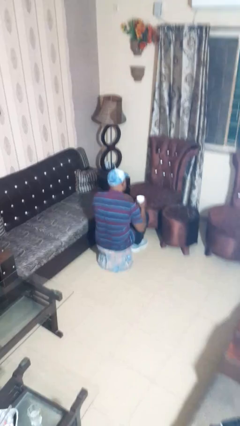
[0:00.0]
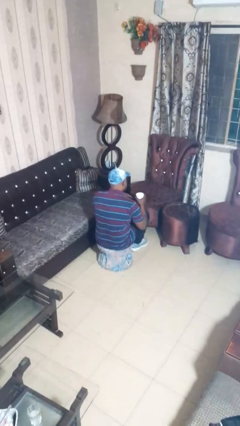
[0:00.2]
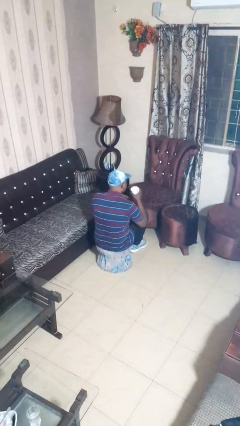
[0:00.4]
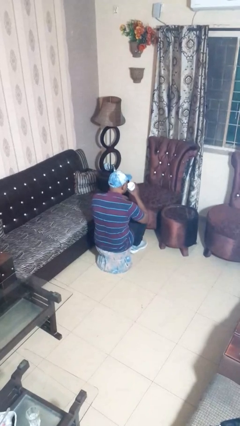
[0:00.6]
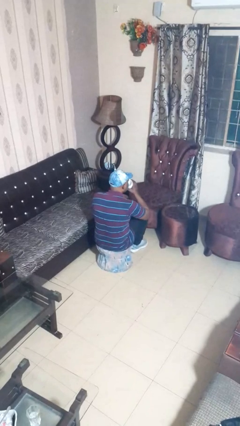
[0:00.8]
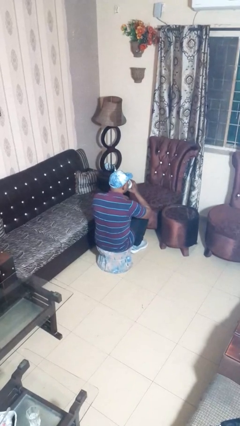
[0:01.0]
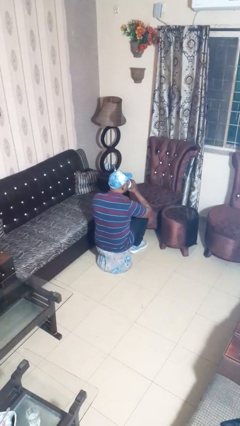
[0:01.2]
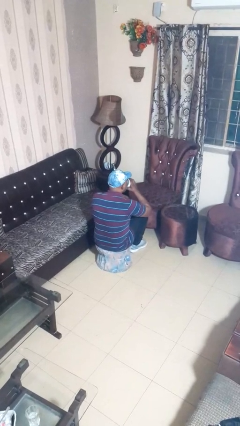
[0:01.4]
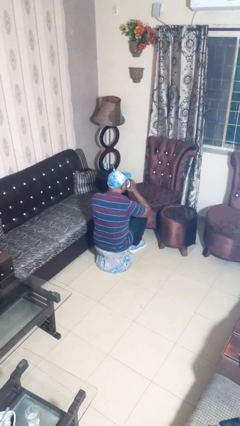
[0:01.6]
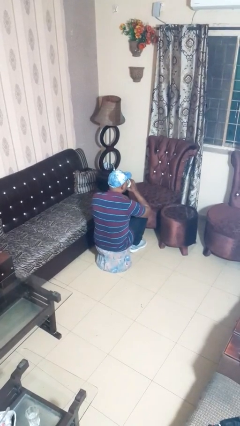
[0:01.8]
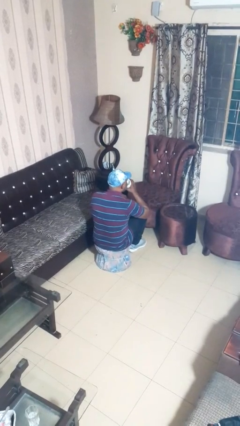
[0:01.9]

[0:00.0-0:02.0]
person drinks from mug

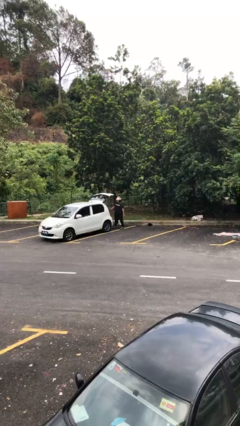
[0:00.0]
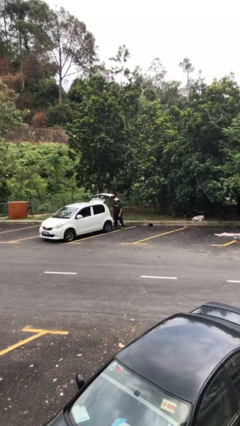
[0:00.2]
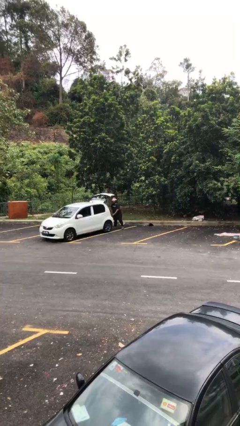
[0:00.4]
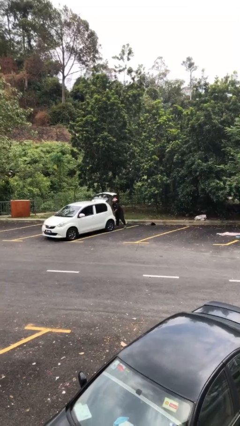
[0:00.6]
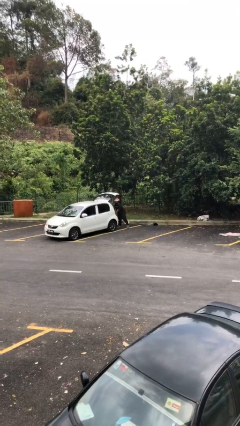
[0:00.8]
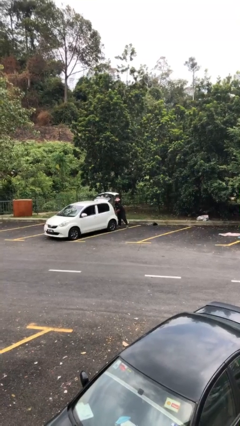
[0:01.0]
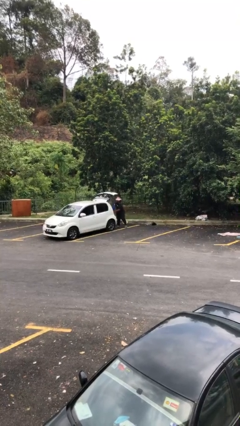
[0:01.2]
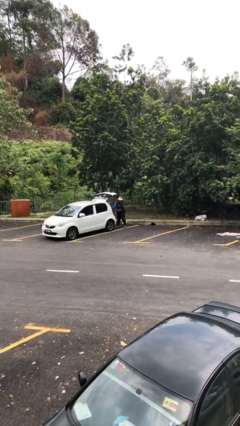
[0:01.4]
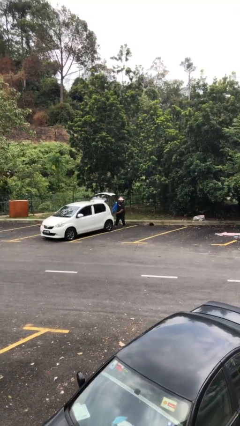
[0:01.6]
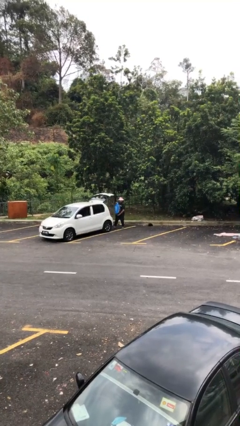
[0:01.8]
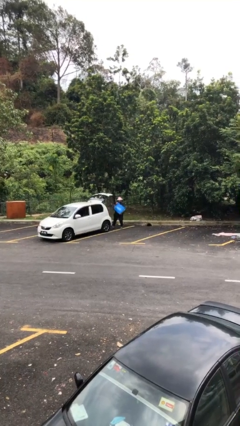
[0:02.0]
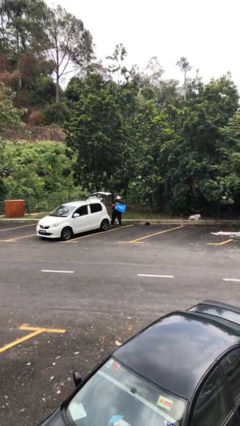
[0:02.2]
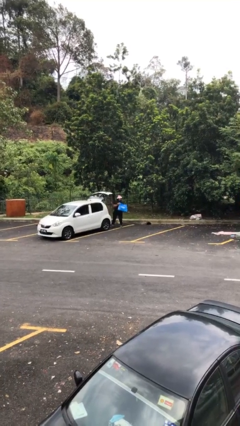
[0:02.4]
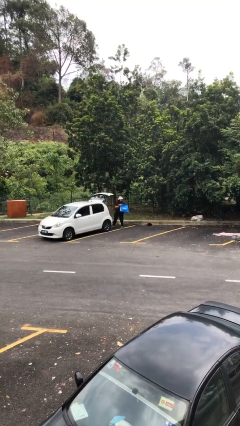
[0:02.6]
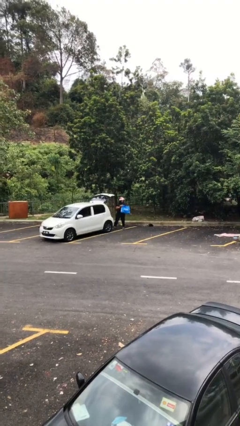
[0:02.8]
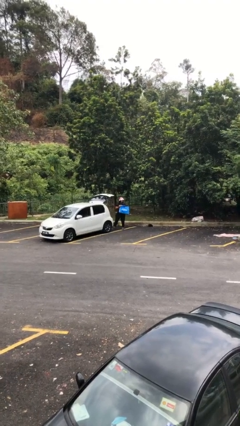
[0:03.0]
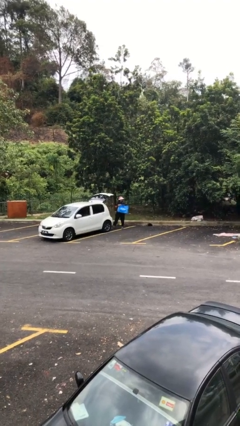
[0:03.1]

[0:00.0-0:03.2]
person unloads car

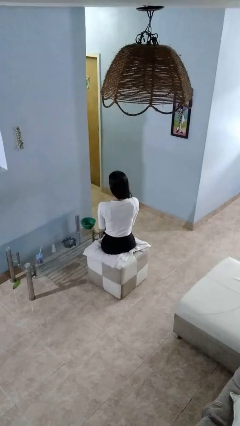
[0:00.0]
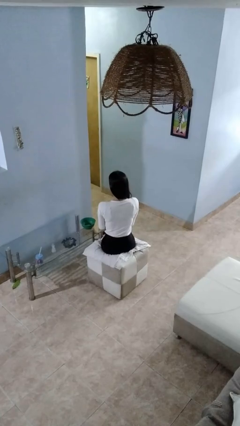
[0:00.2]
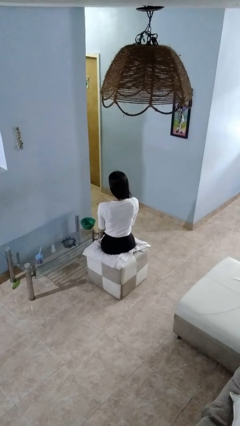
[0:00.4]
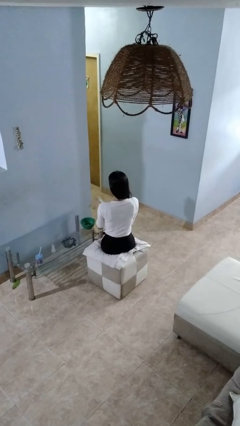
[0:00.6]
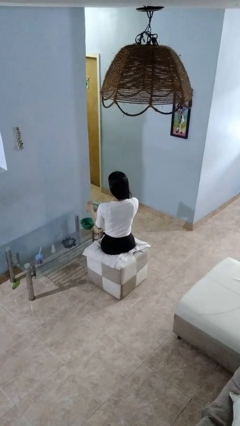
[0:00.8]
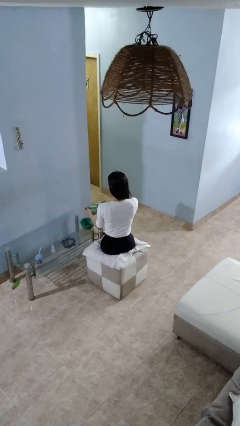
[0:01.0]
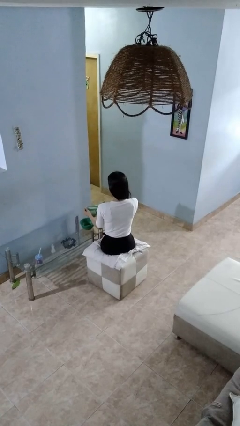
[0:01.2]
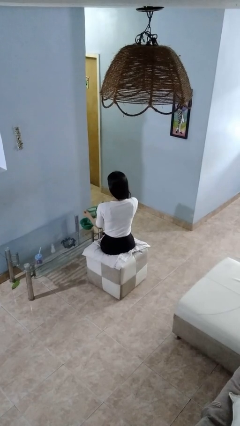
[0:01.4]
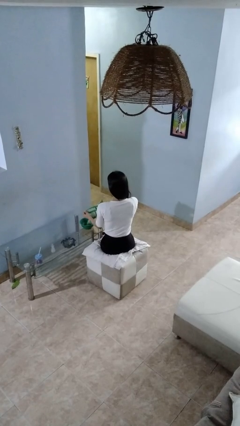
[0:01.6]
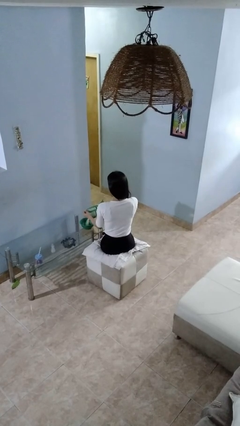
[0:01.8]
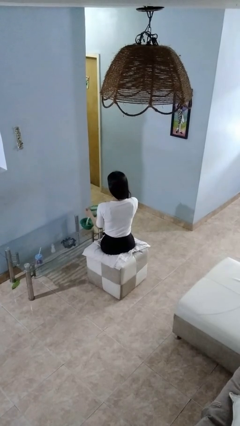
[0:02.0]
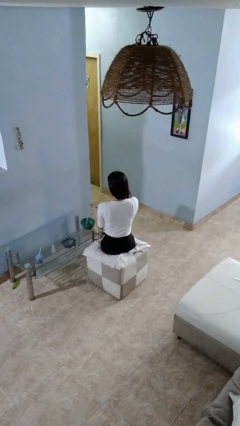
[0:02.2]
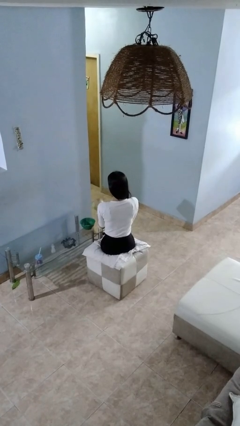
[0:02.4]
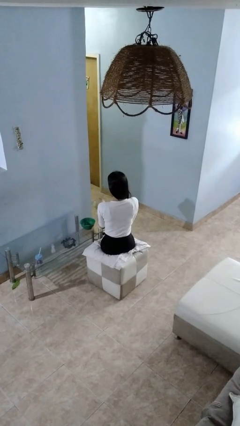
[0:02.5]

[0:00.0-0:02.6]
person pours into bowl

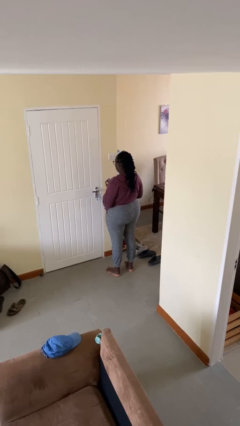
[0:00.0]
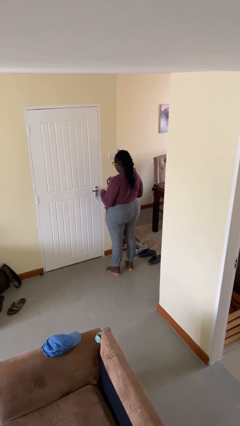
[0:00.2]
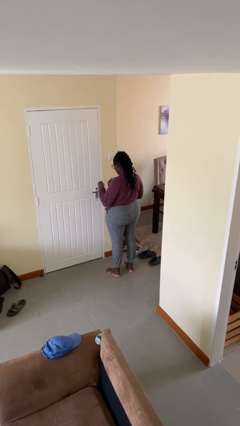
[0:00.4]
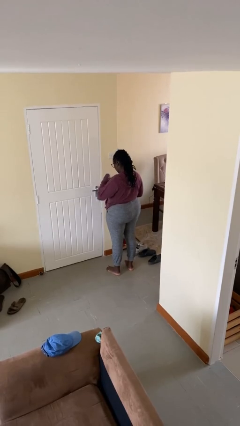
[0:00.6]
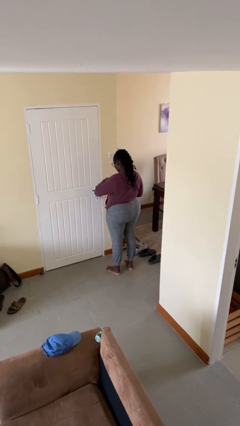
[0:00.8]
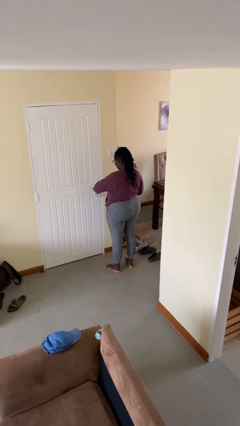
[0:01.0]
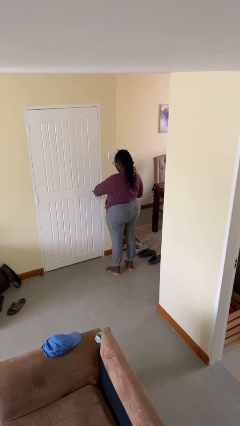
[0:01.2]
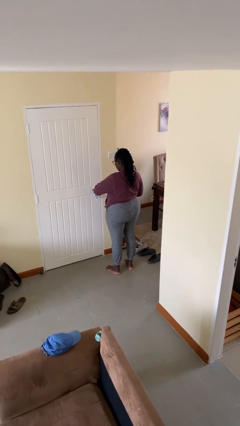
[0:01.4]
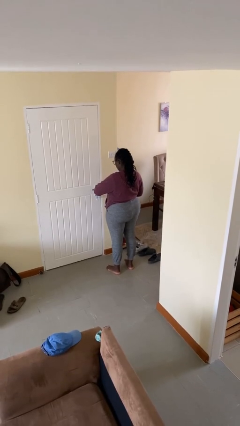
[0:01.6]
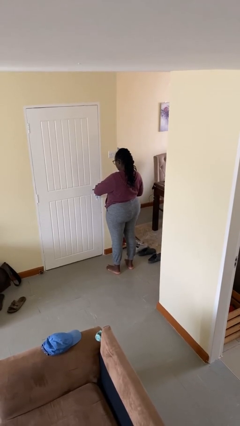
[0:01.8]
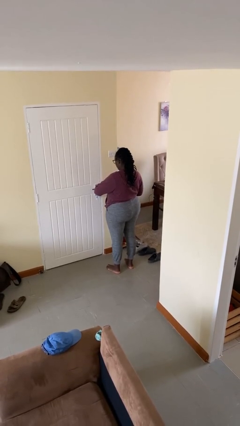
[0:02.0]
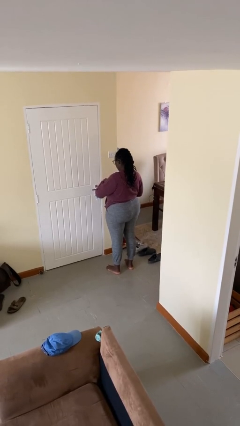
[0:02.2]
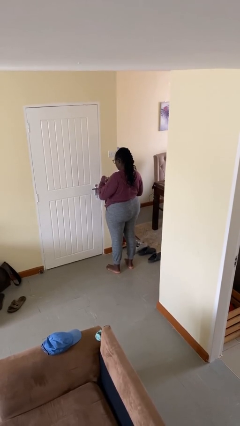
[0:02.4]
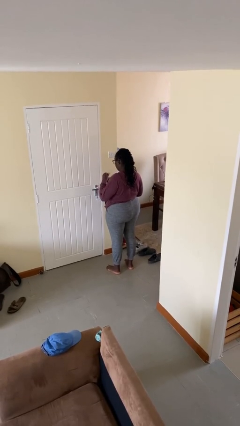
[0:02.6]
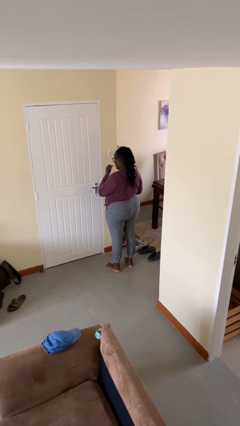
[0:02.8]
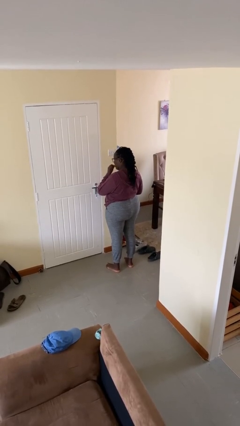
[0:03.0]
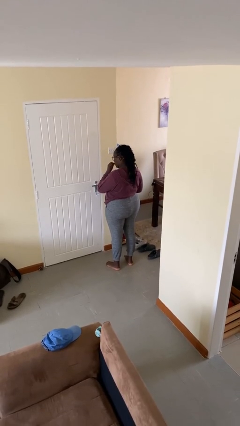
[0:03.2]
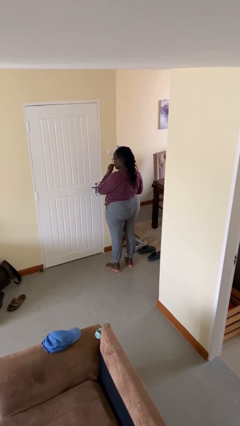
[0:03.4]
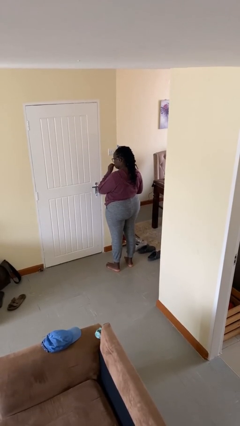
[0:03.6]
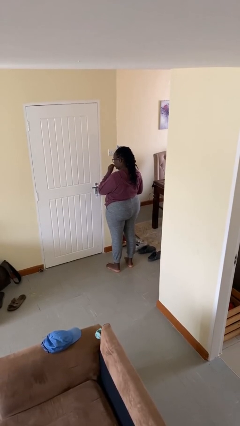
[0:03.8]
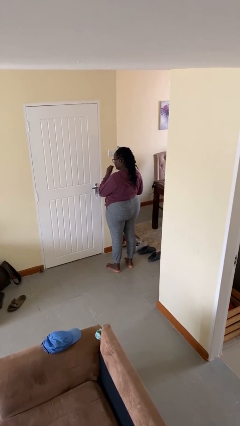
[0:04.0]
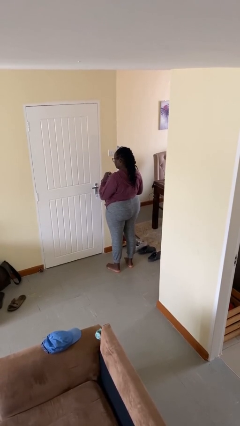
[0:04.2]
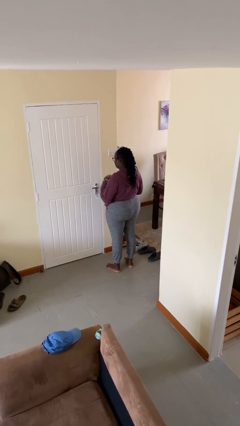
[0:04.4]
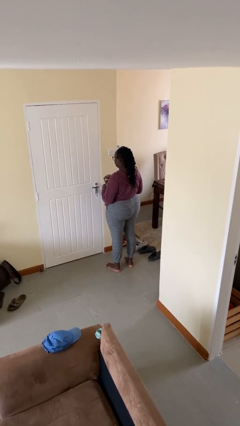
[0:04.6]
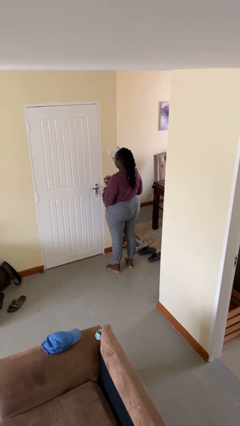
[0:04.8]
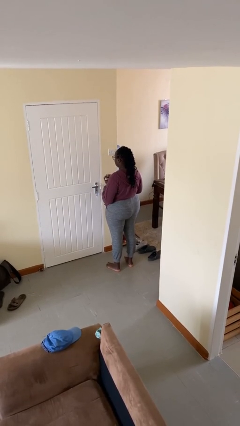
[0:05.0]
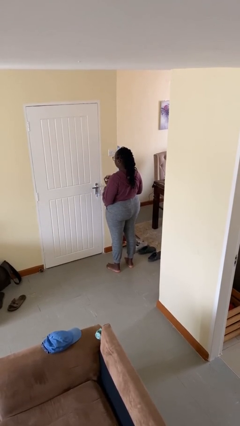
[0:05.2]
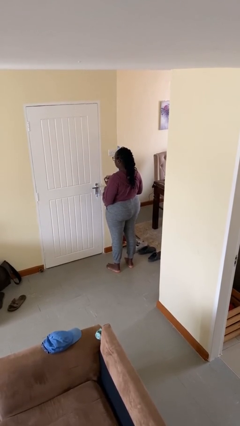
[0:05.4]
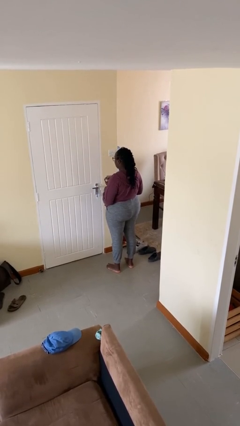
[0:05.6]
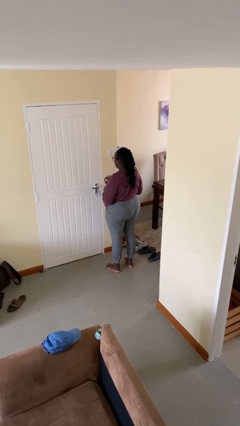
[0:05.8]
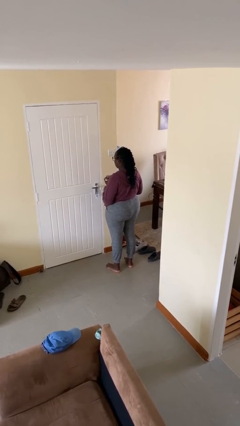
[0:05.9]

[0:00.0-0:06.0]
person eats snack from bag

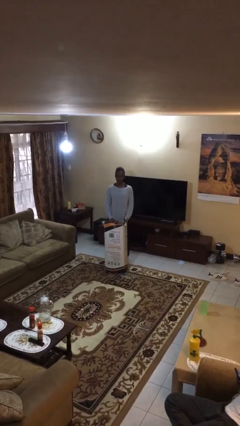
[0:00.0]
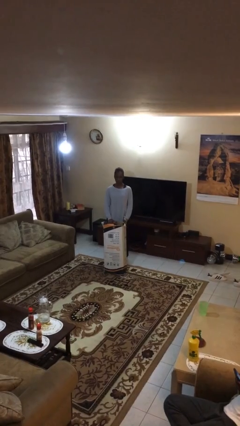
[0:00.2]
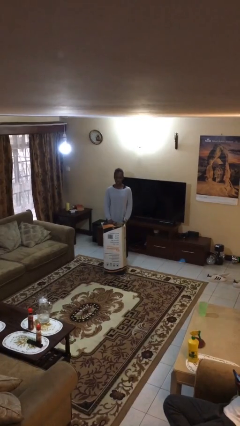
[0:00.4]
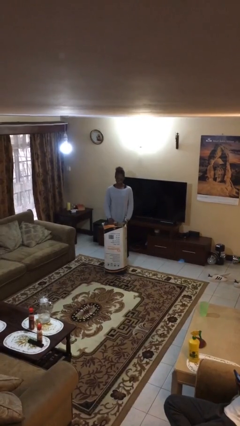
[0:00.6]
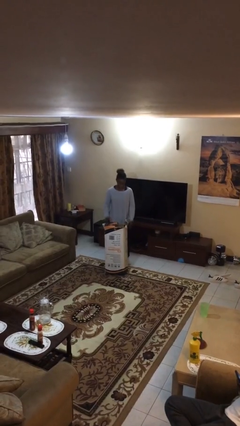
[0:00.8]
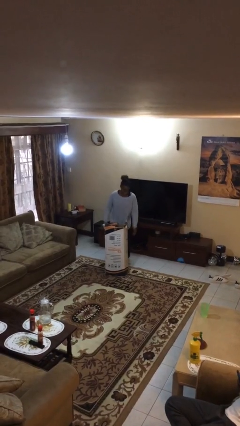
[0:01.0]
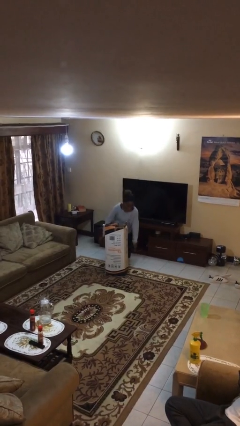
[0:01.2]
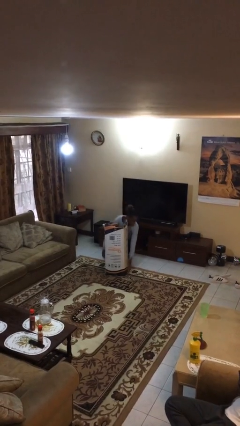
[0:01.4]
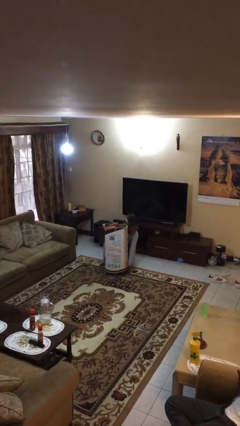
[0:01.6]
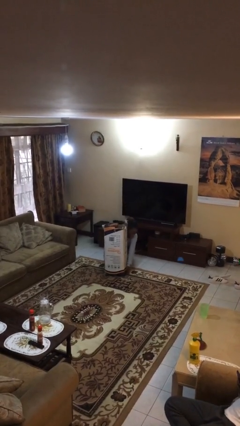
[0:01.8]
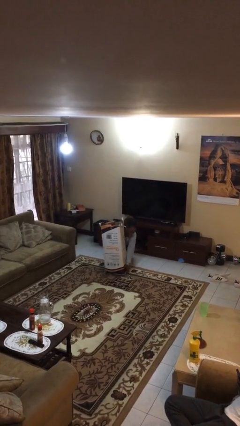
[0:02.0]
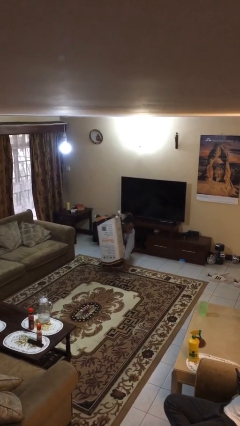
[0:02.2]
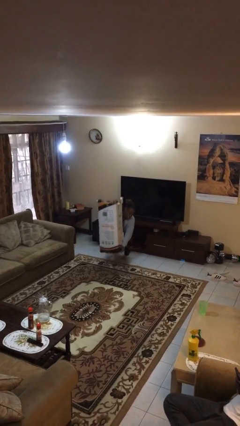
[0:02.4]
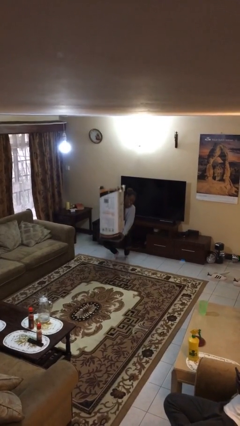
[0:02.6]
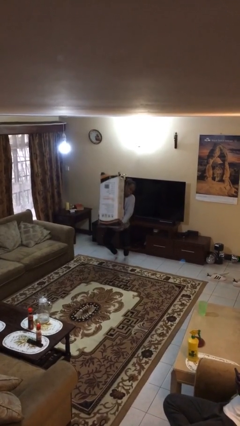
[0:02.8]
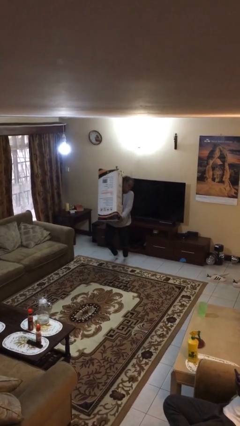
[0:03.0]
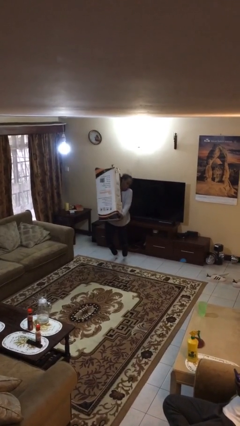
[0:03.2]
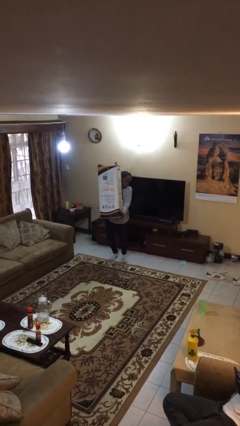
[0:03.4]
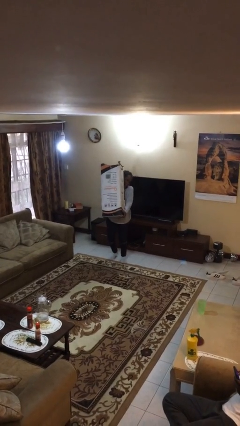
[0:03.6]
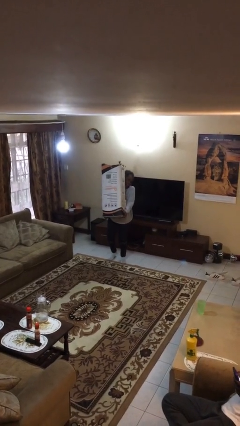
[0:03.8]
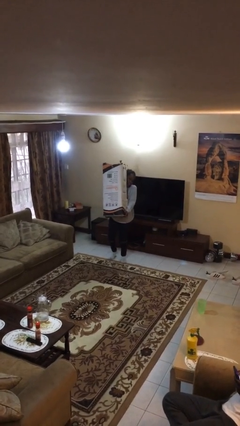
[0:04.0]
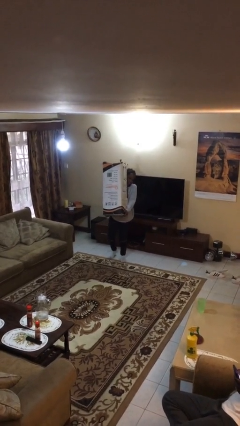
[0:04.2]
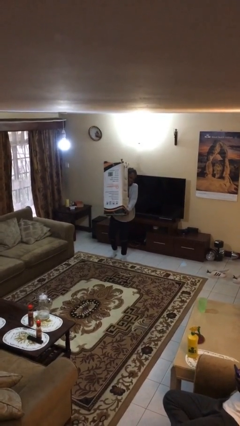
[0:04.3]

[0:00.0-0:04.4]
person picks up object from floor
